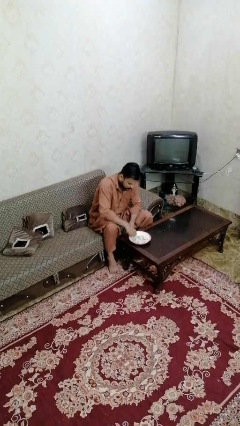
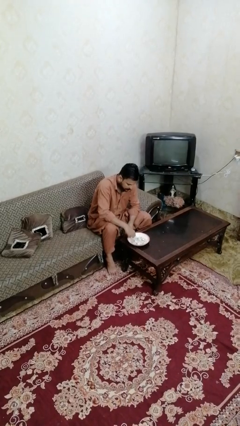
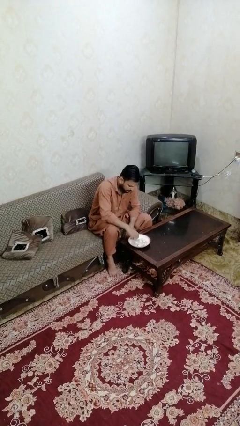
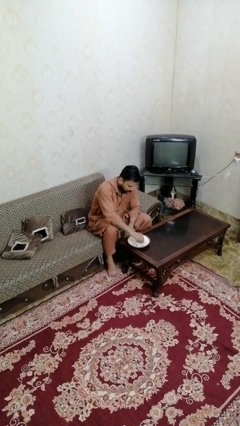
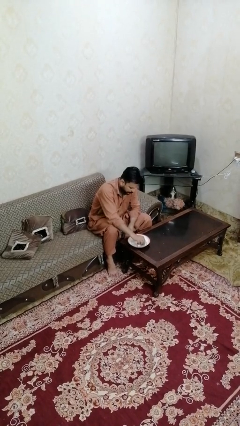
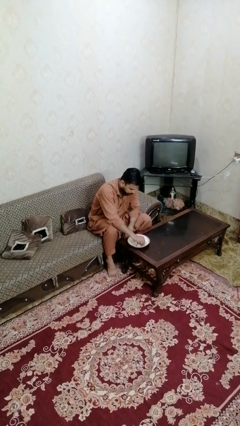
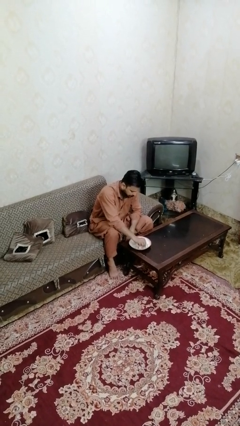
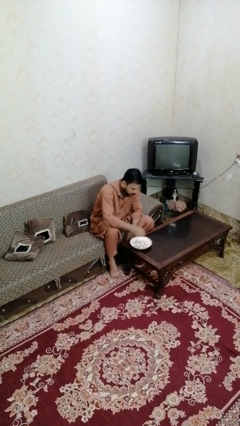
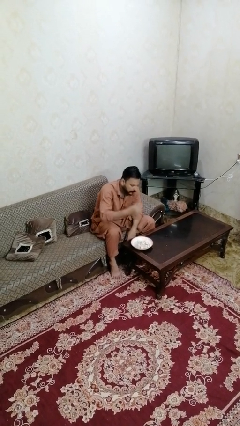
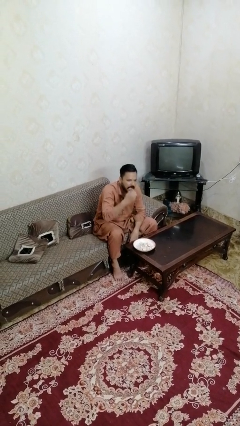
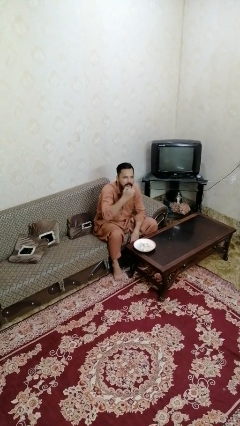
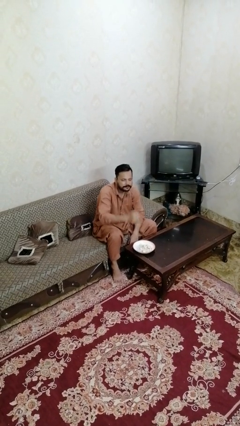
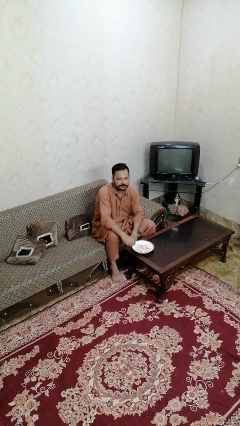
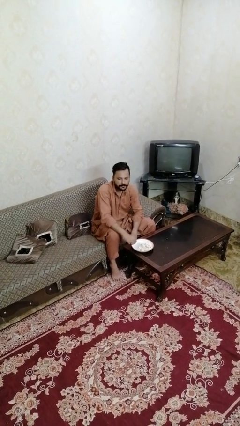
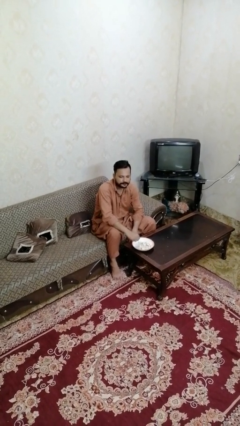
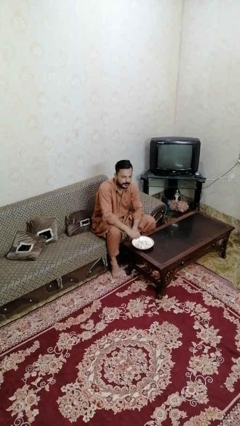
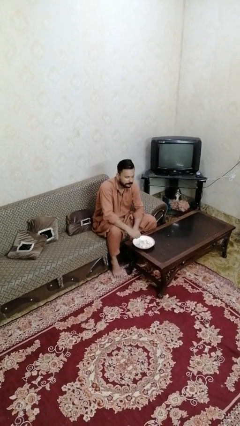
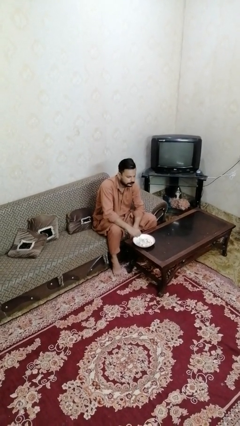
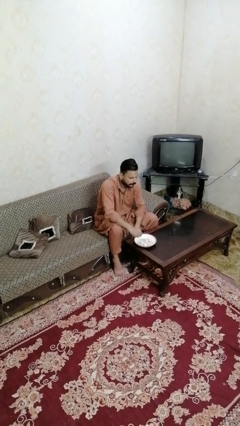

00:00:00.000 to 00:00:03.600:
person eats with hands

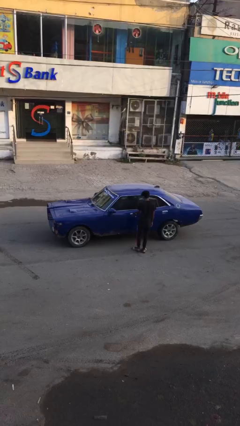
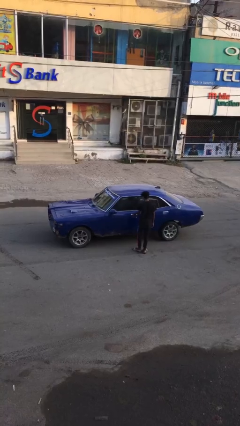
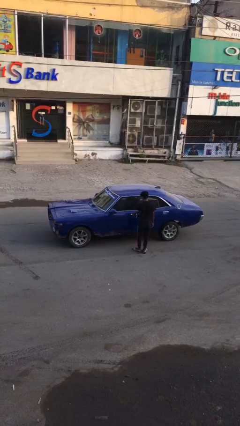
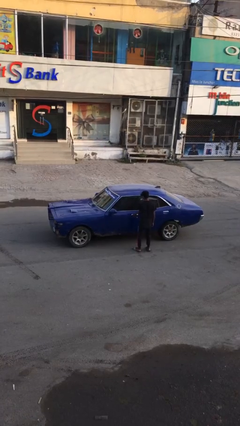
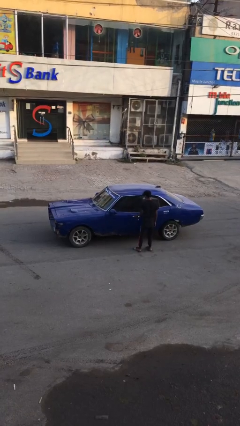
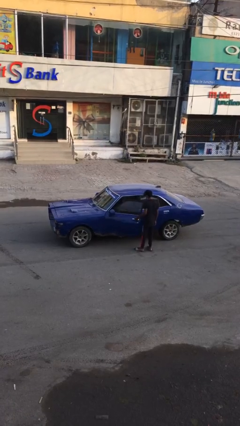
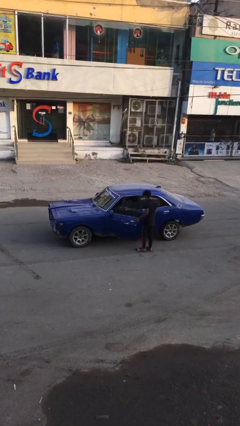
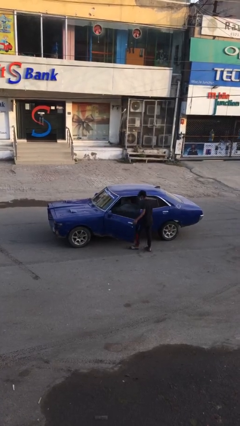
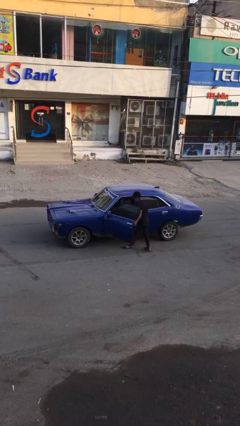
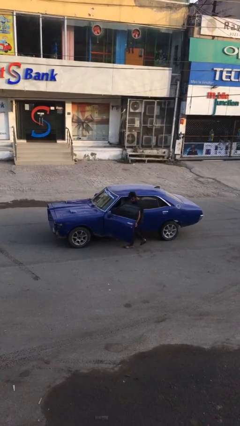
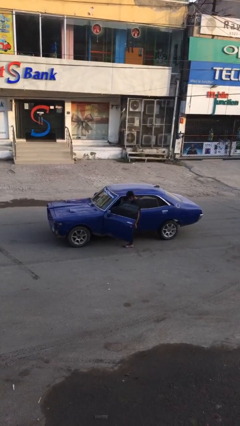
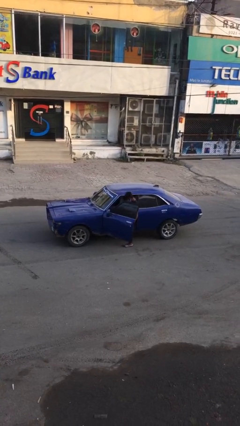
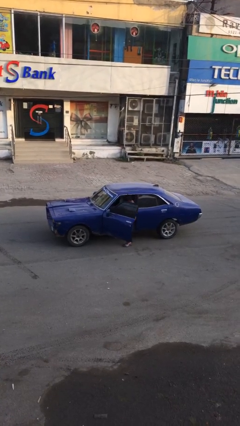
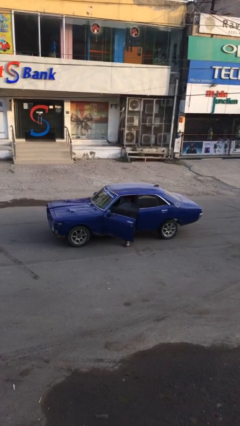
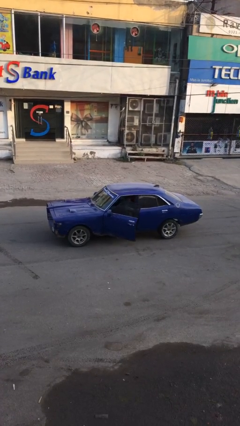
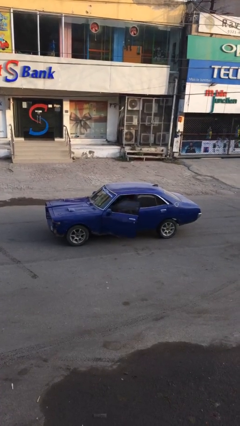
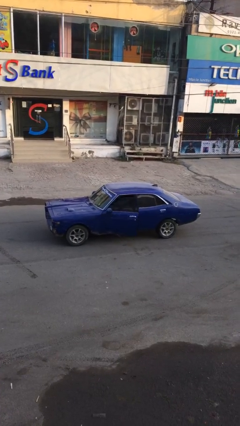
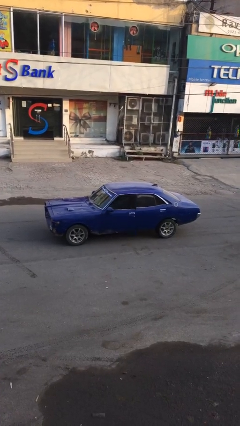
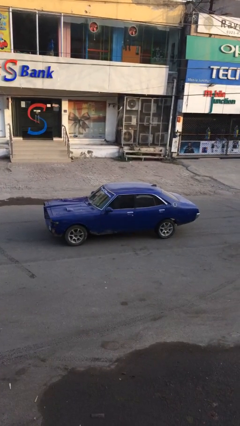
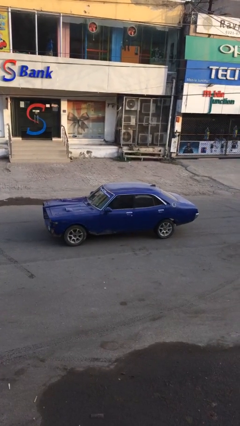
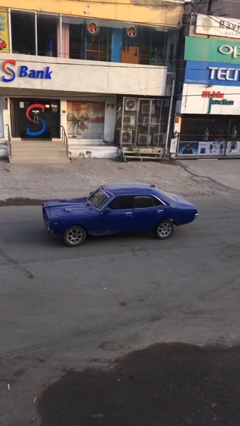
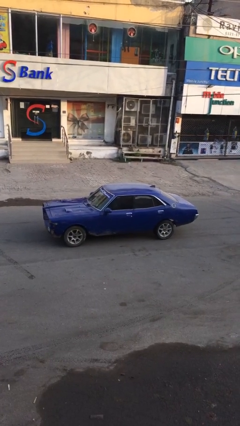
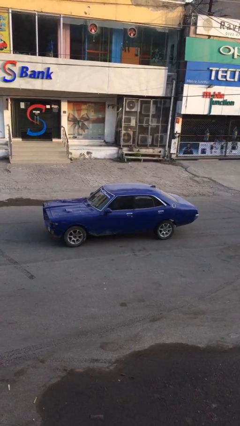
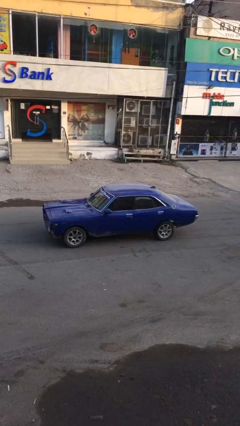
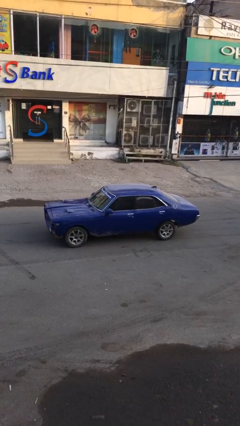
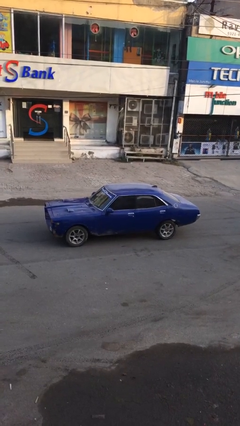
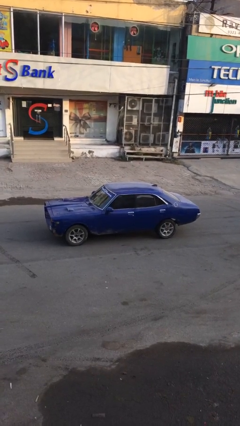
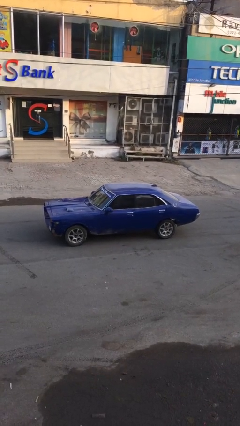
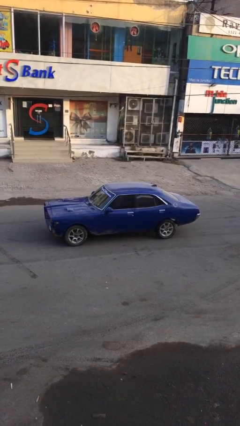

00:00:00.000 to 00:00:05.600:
car picks up person

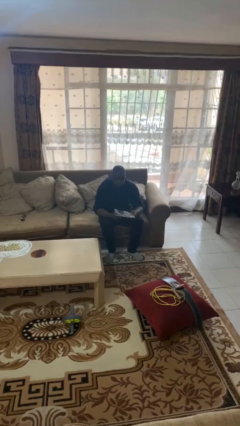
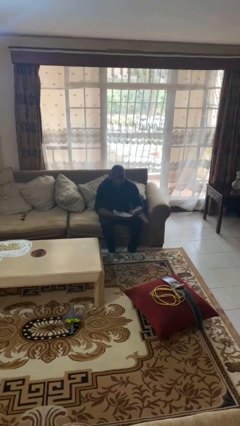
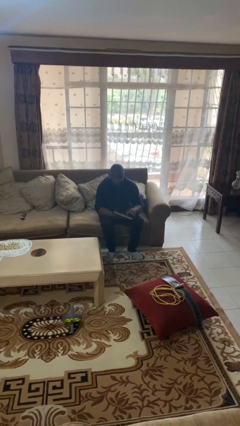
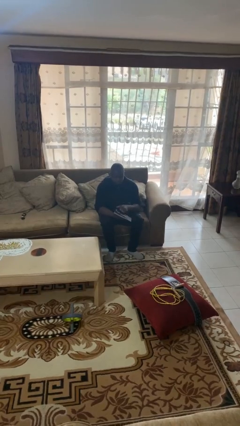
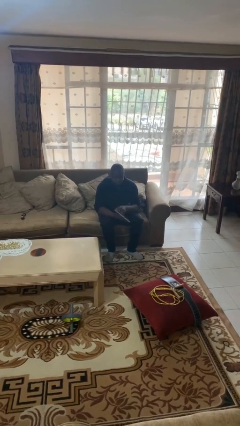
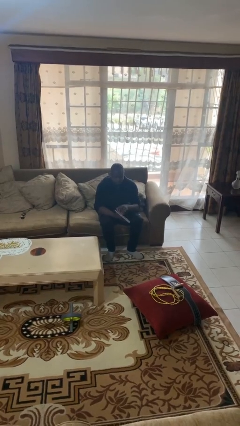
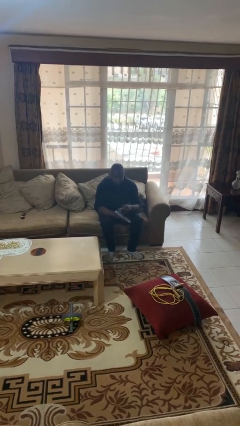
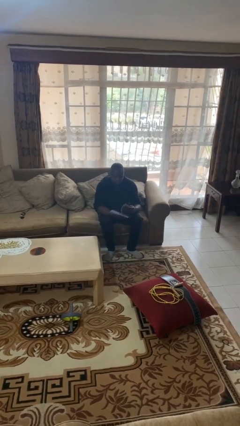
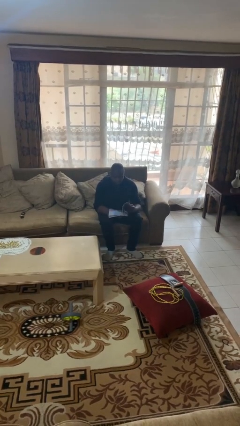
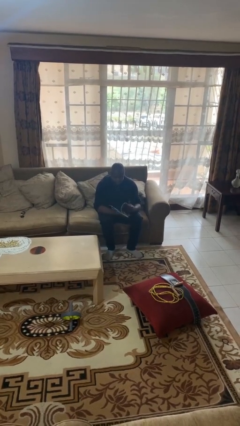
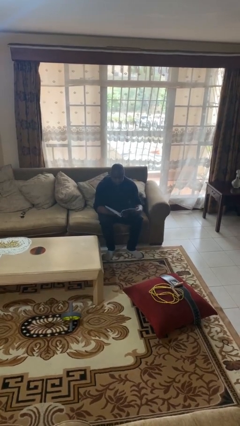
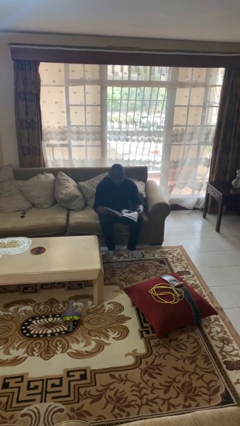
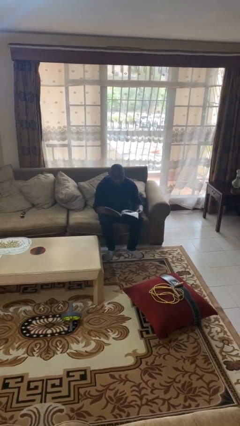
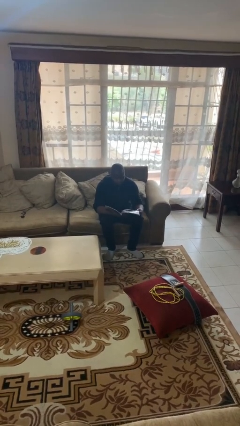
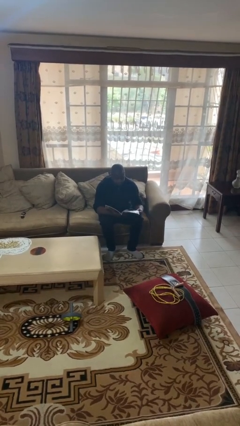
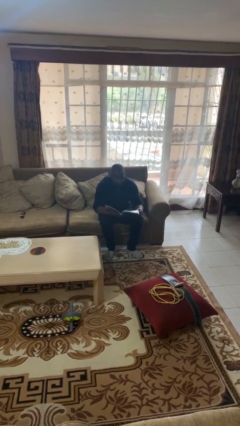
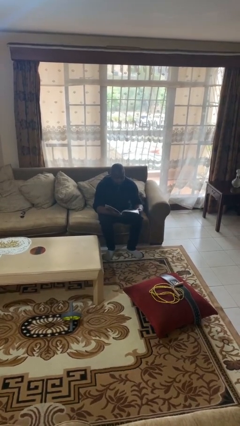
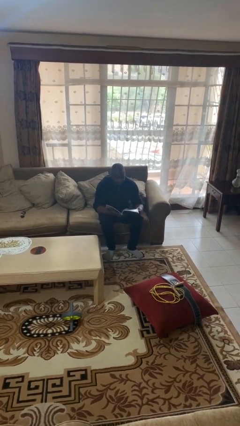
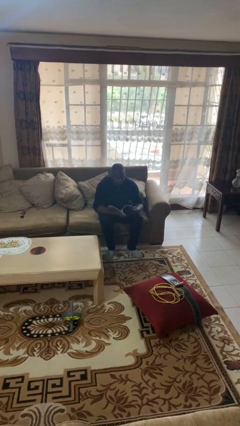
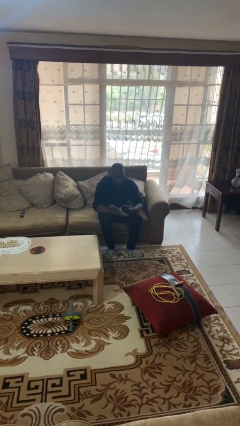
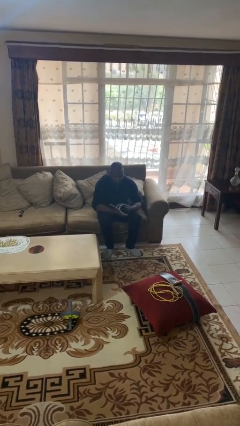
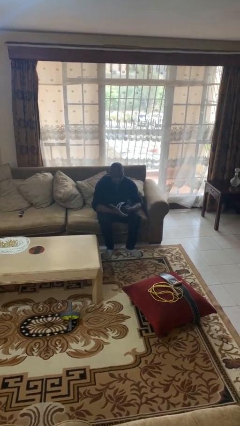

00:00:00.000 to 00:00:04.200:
person reads document

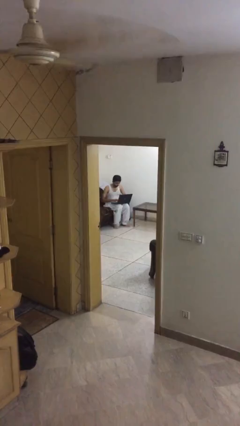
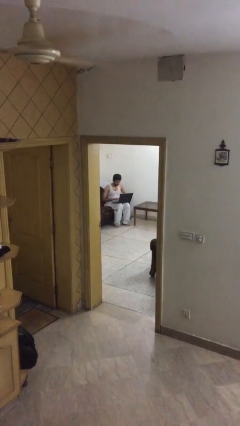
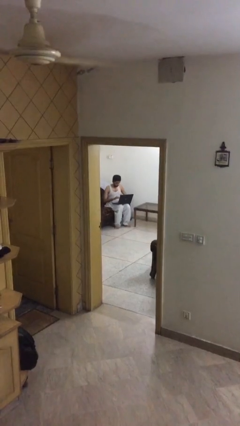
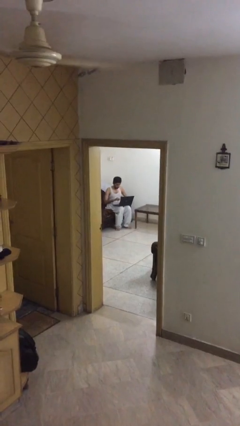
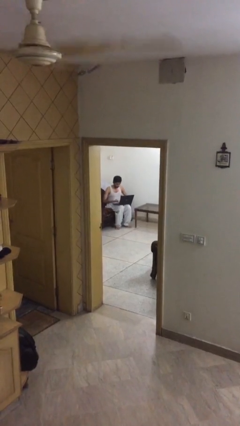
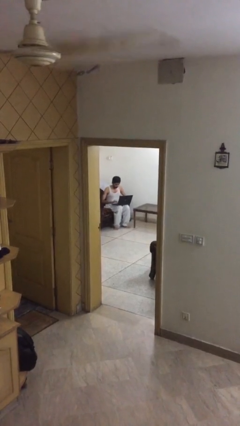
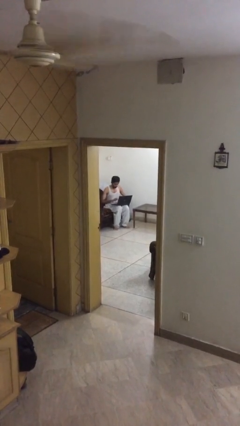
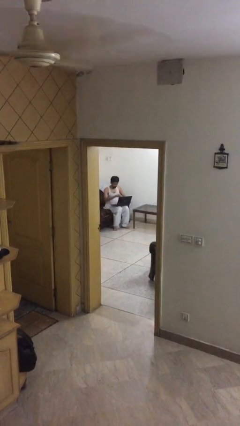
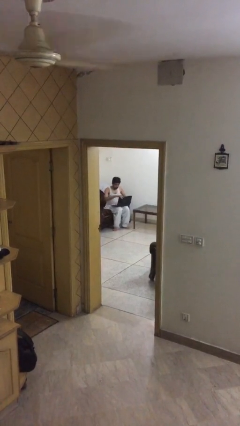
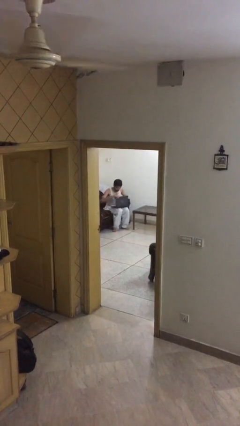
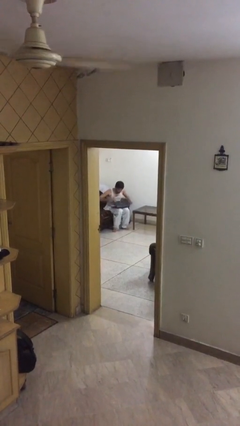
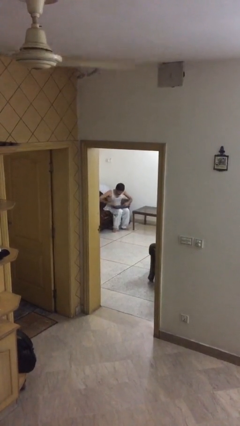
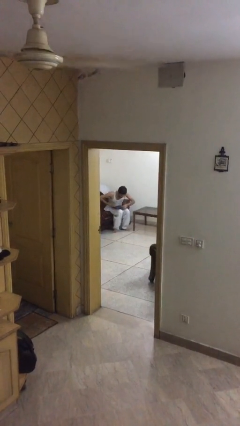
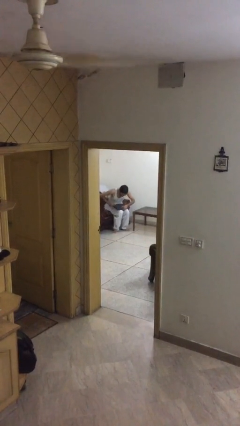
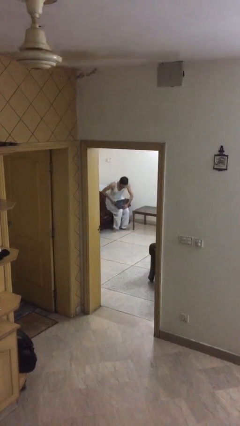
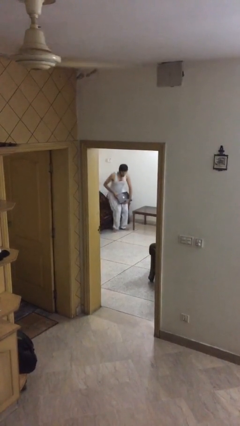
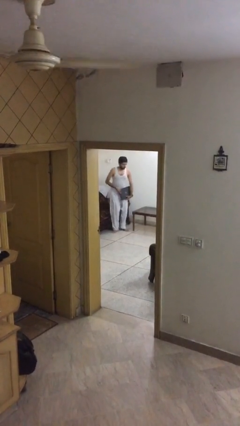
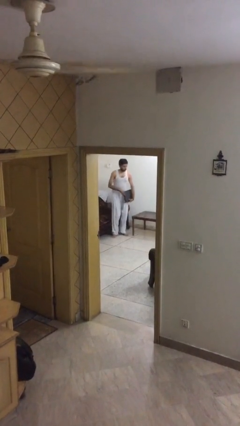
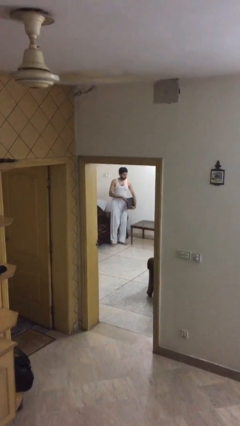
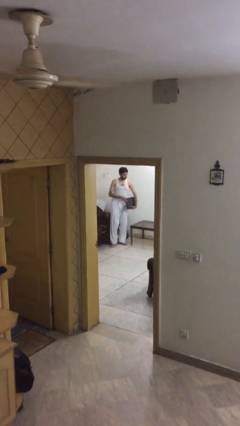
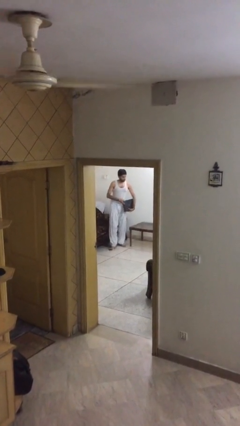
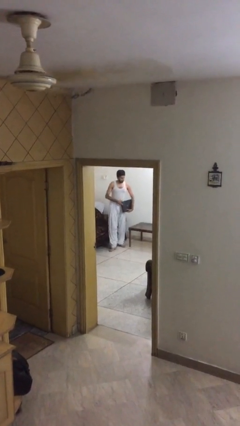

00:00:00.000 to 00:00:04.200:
person stands up
